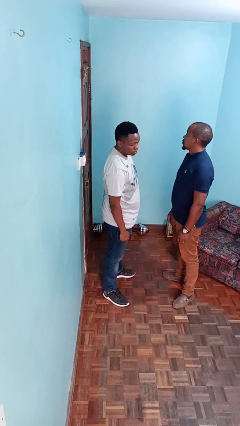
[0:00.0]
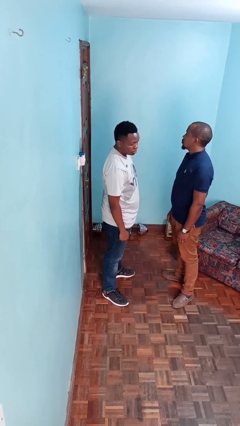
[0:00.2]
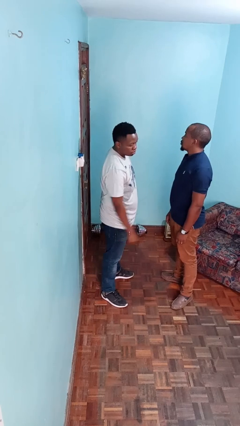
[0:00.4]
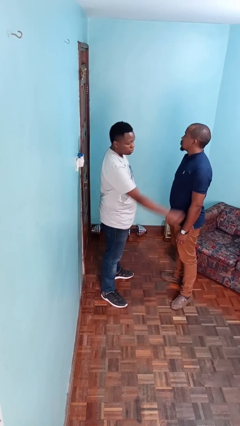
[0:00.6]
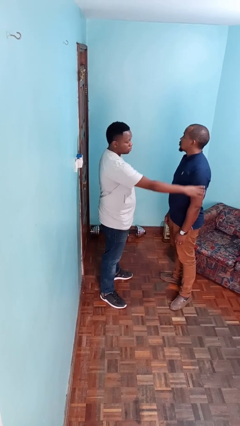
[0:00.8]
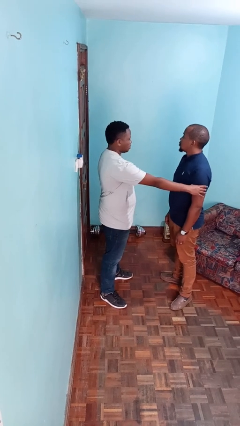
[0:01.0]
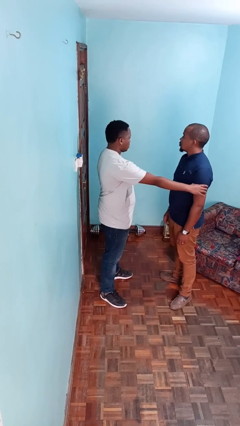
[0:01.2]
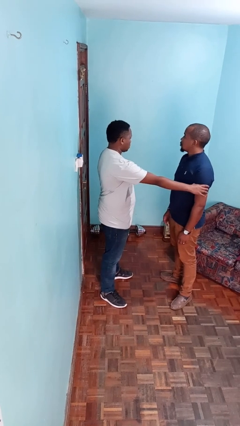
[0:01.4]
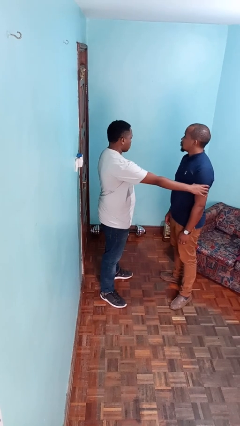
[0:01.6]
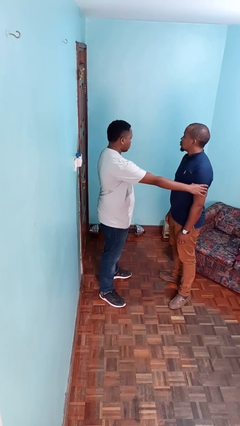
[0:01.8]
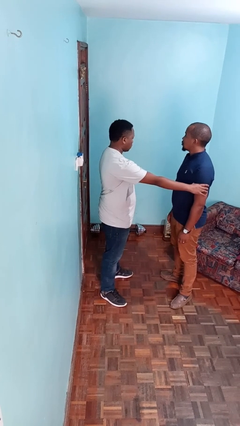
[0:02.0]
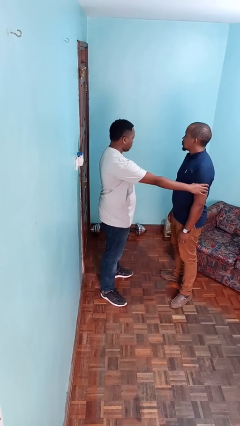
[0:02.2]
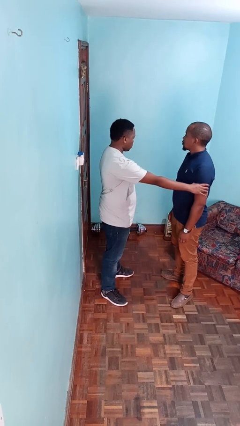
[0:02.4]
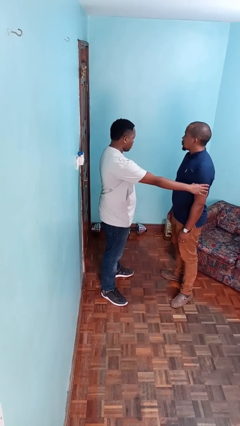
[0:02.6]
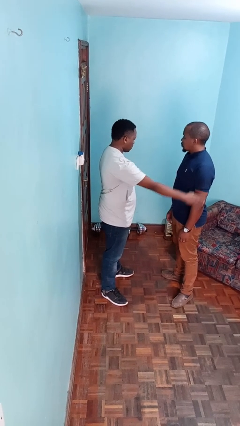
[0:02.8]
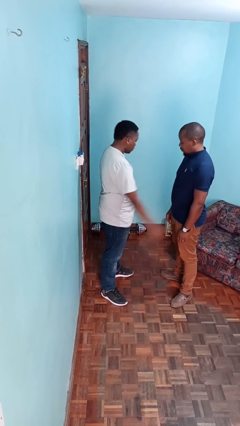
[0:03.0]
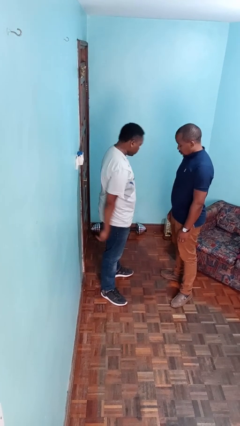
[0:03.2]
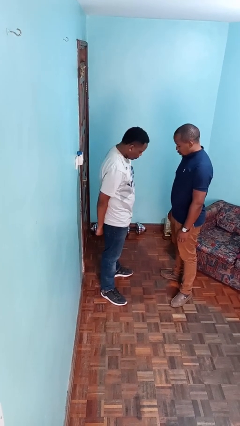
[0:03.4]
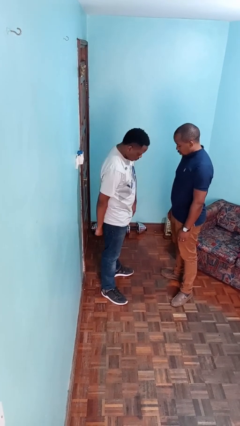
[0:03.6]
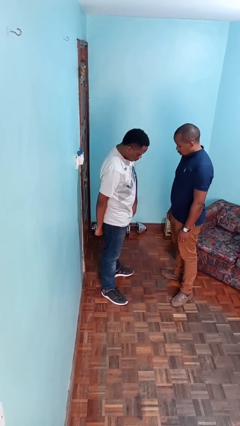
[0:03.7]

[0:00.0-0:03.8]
person grabs person by bicep

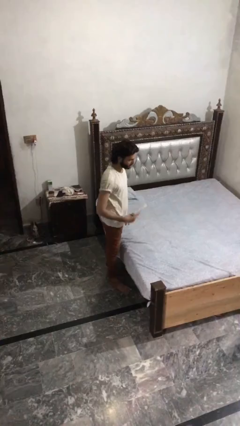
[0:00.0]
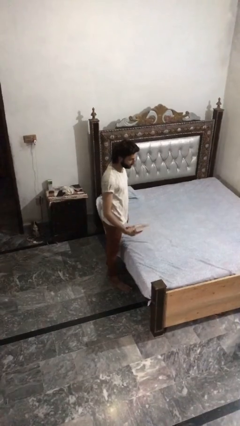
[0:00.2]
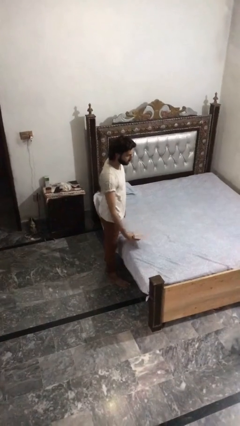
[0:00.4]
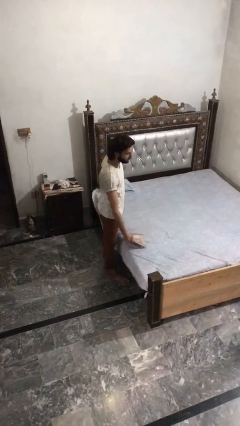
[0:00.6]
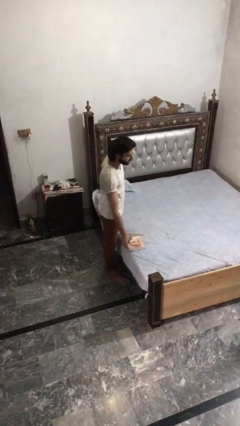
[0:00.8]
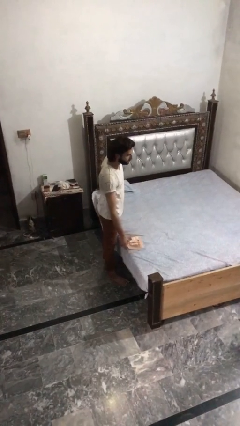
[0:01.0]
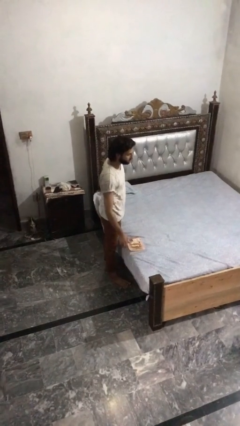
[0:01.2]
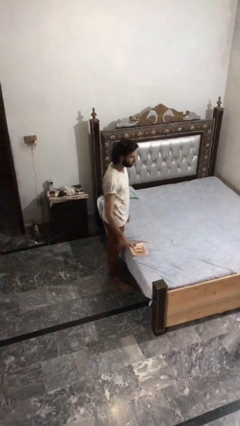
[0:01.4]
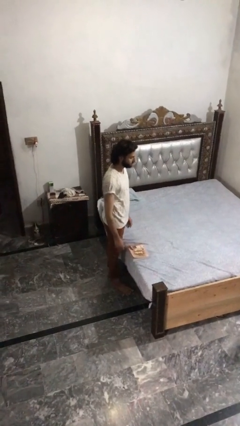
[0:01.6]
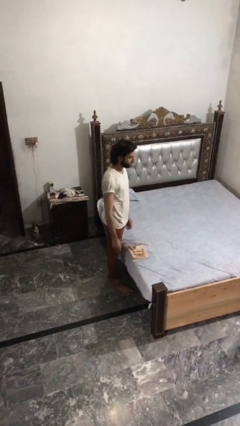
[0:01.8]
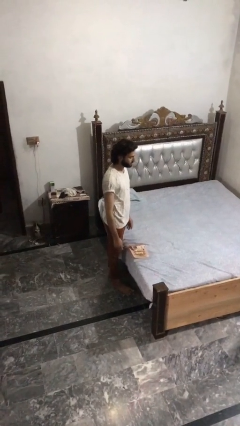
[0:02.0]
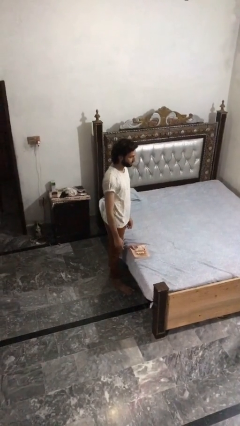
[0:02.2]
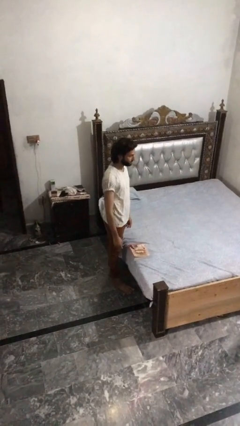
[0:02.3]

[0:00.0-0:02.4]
person puts down object on bed

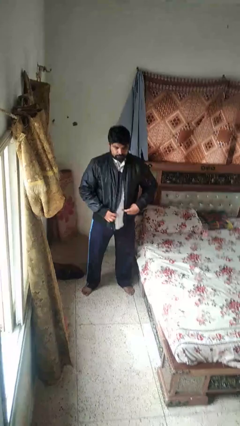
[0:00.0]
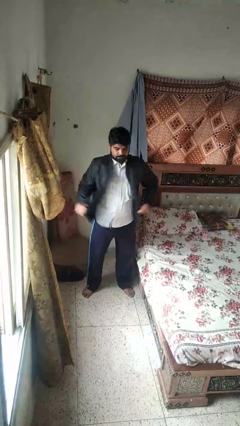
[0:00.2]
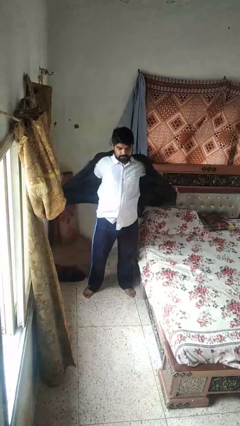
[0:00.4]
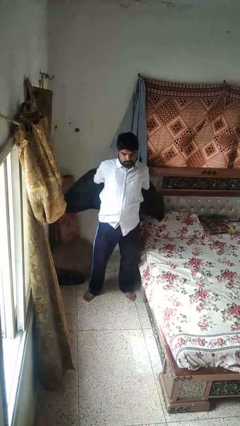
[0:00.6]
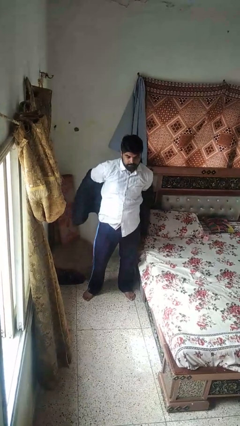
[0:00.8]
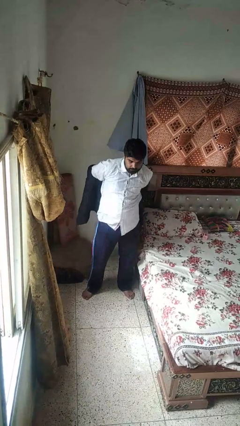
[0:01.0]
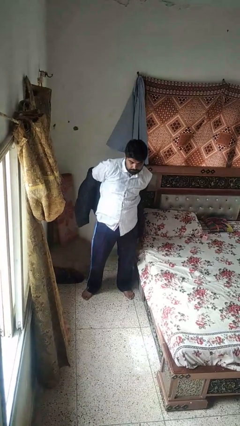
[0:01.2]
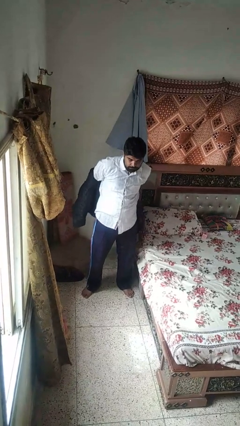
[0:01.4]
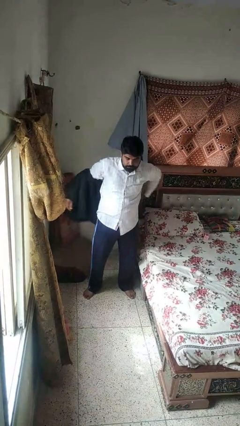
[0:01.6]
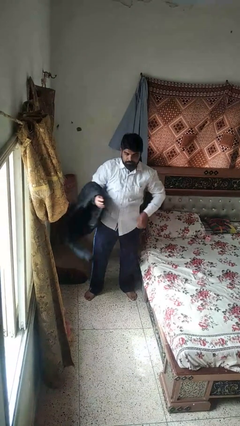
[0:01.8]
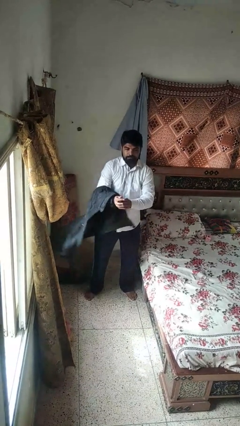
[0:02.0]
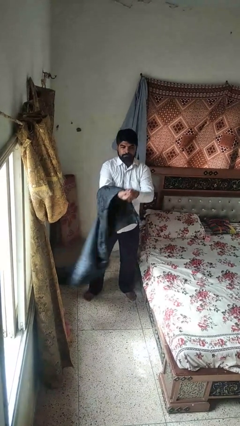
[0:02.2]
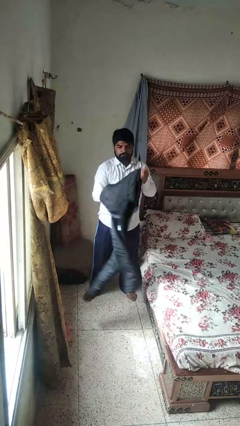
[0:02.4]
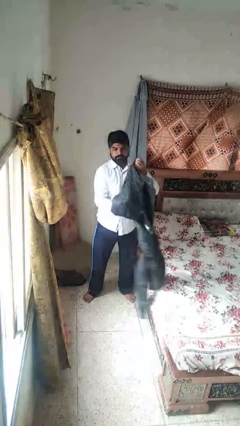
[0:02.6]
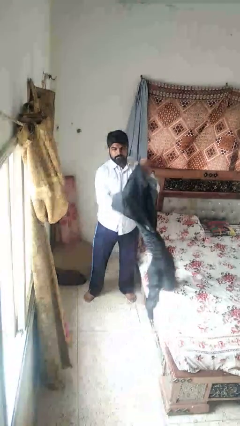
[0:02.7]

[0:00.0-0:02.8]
person takes off jacket

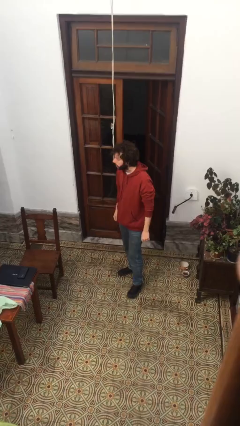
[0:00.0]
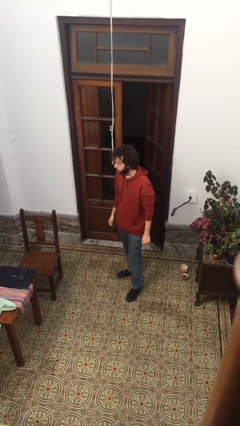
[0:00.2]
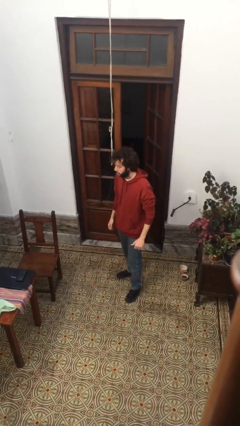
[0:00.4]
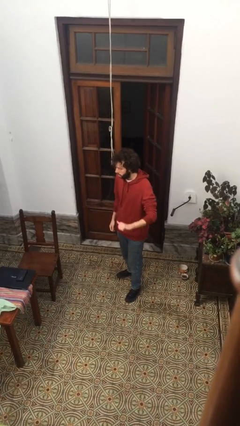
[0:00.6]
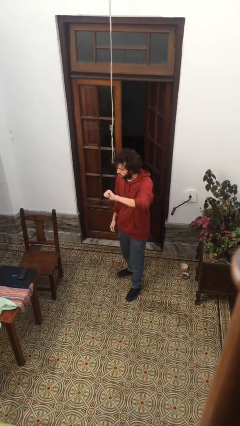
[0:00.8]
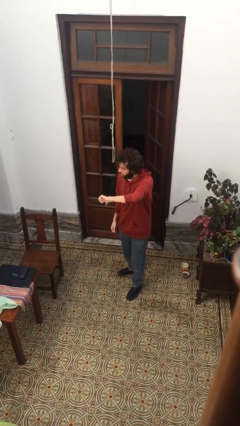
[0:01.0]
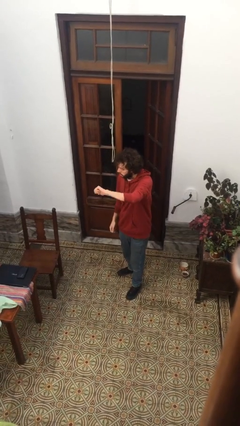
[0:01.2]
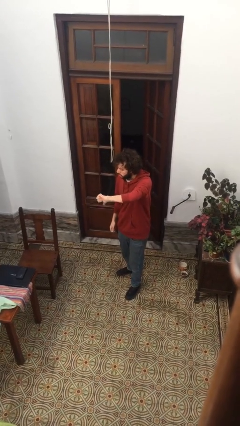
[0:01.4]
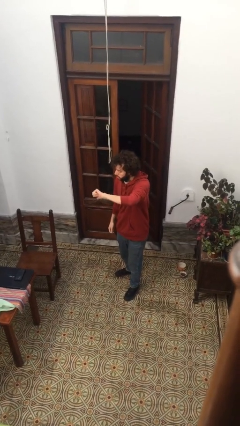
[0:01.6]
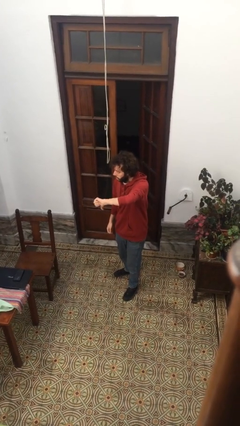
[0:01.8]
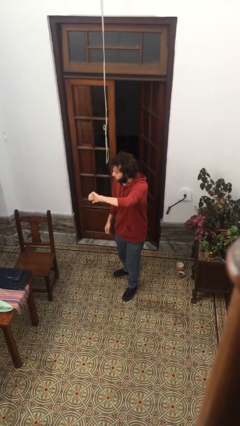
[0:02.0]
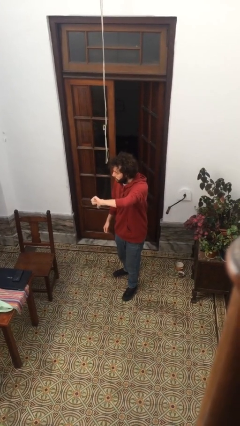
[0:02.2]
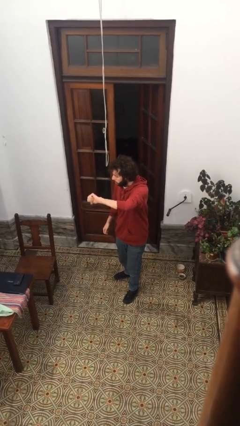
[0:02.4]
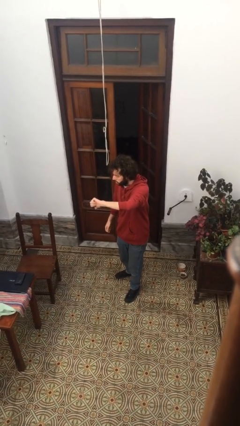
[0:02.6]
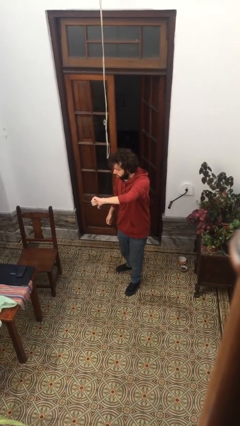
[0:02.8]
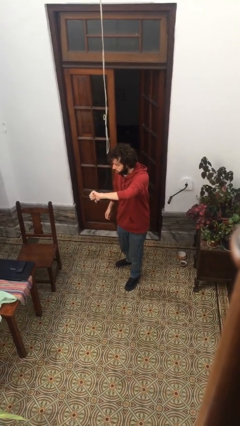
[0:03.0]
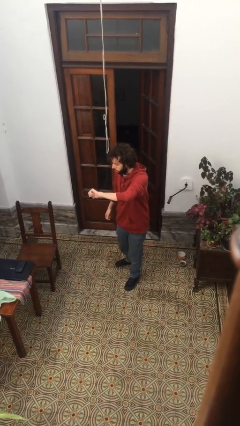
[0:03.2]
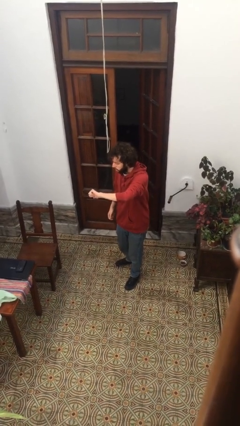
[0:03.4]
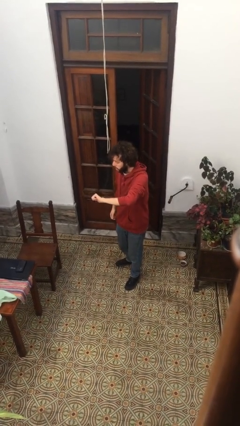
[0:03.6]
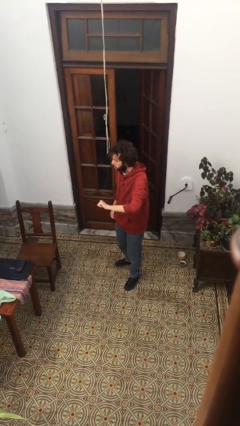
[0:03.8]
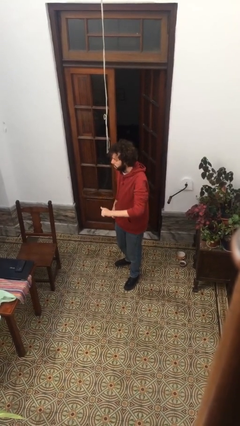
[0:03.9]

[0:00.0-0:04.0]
person gestures thumbs down

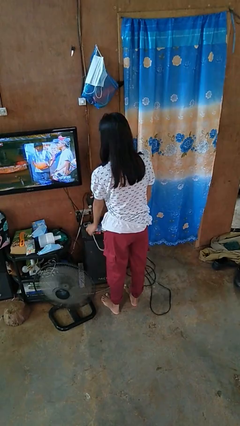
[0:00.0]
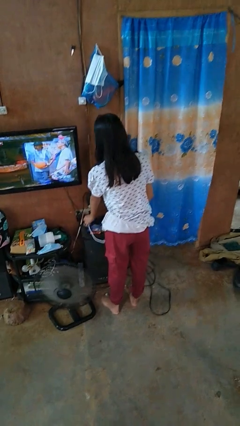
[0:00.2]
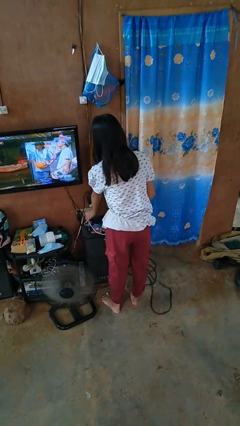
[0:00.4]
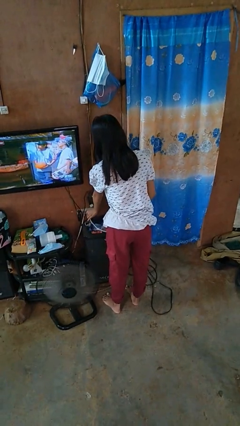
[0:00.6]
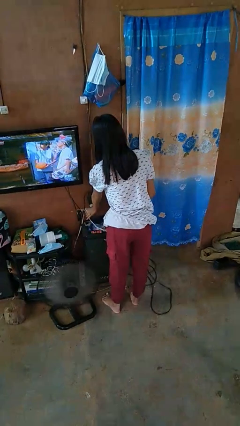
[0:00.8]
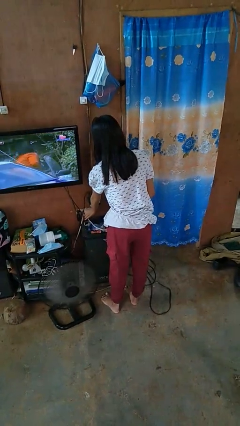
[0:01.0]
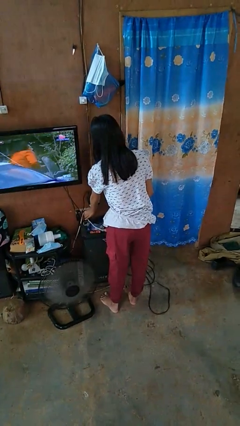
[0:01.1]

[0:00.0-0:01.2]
person plugs into electrical socket

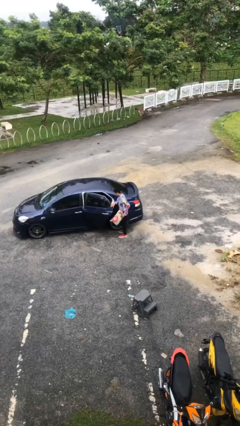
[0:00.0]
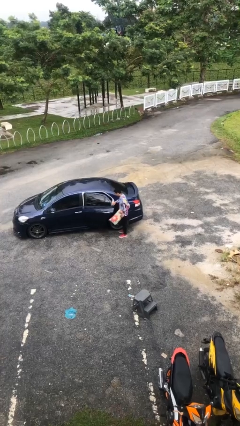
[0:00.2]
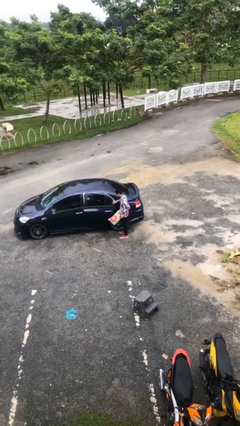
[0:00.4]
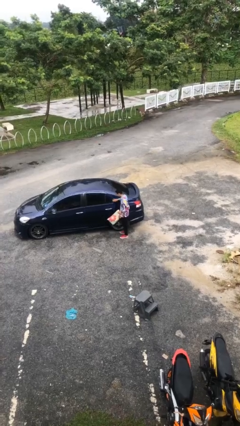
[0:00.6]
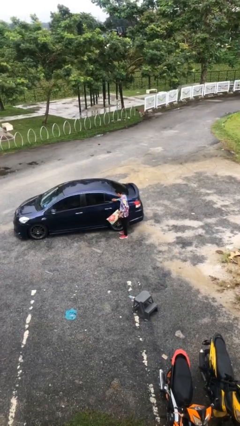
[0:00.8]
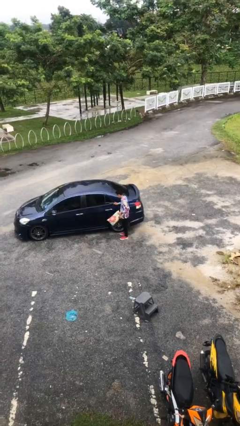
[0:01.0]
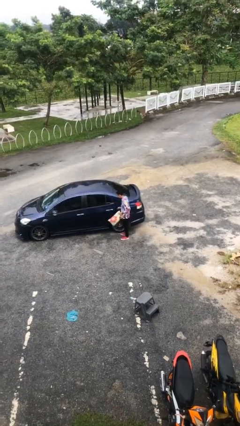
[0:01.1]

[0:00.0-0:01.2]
person closes car door

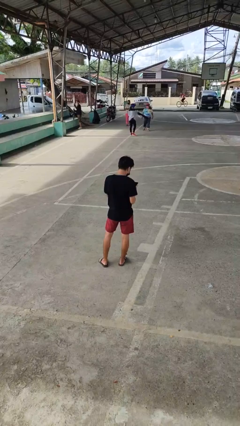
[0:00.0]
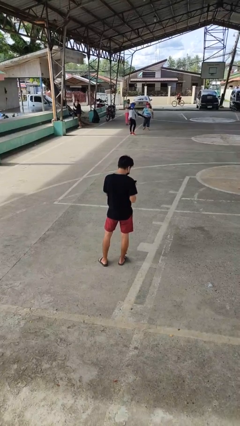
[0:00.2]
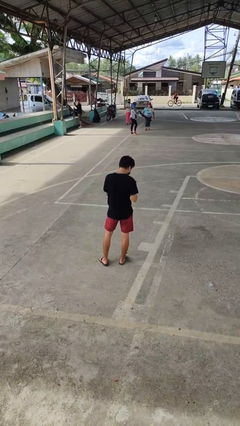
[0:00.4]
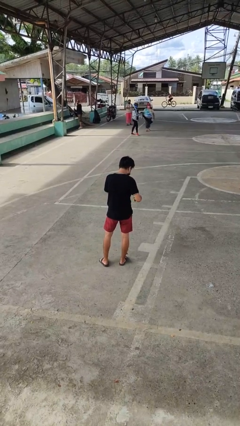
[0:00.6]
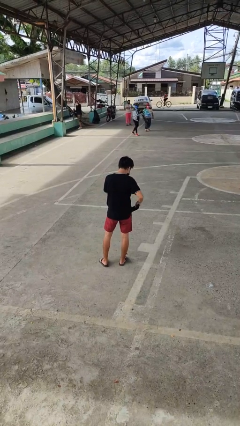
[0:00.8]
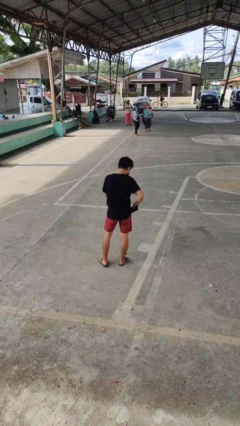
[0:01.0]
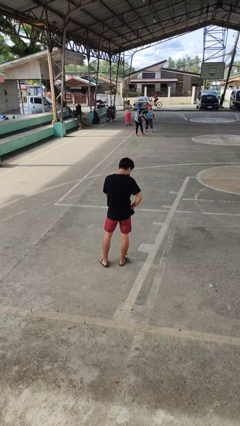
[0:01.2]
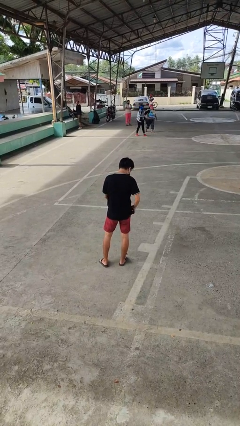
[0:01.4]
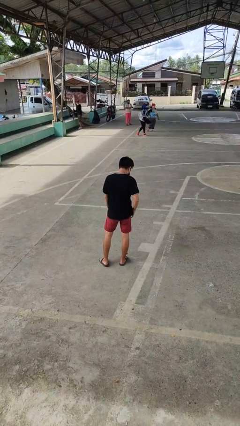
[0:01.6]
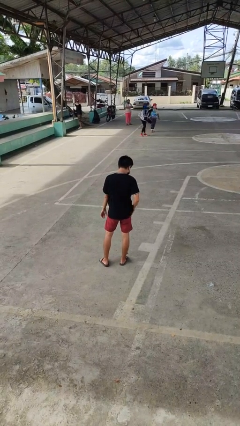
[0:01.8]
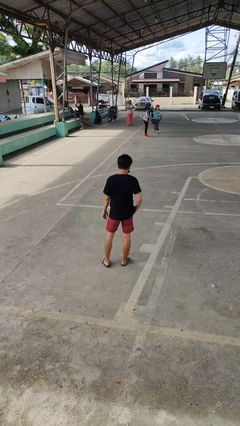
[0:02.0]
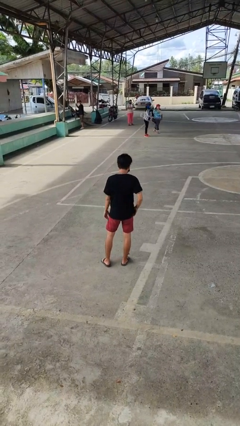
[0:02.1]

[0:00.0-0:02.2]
person puts phone into pocket
